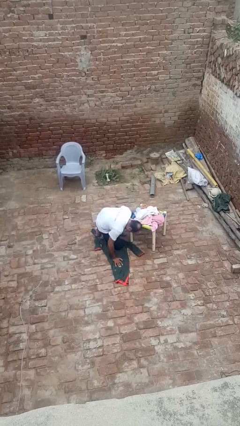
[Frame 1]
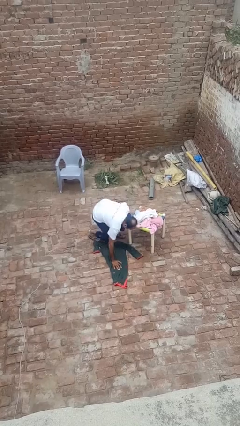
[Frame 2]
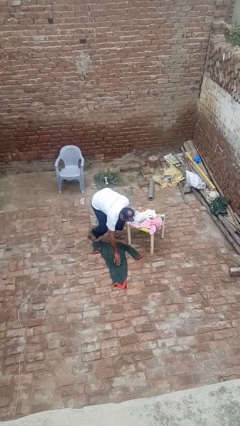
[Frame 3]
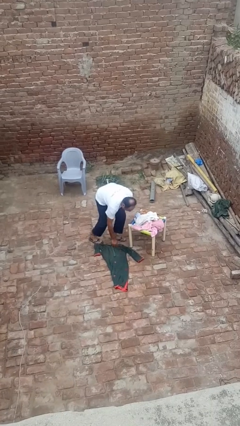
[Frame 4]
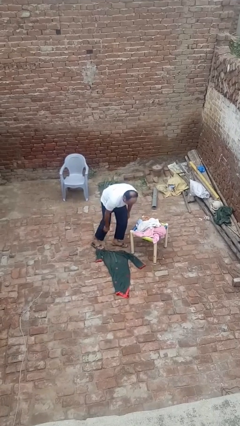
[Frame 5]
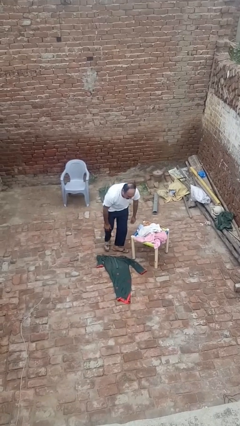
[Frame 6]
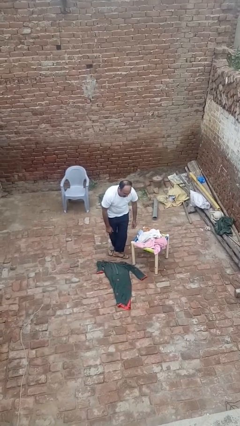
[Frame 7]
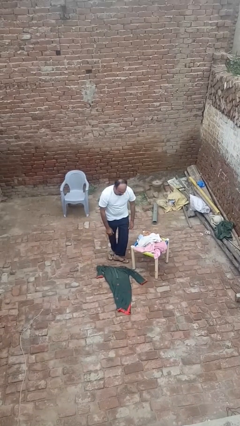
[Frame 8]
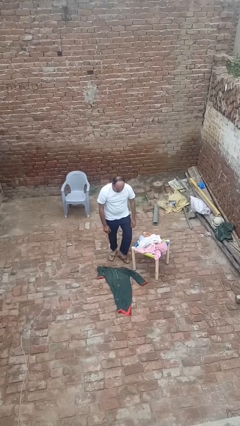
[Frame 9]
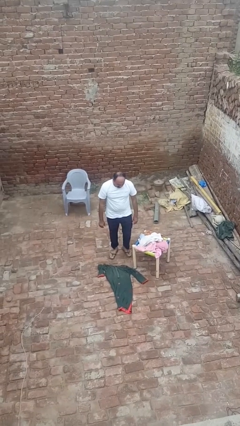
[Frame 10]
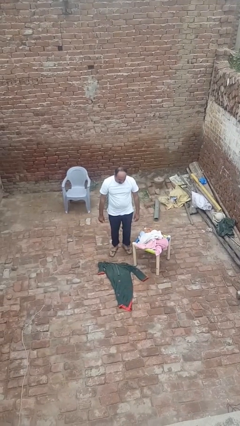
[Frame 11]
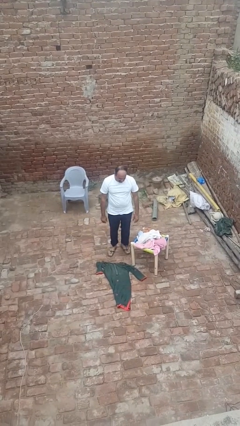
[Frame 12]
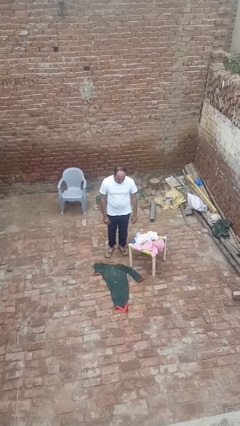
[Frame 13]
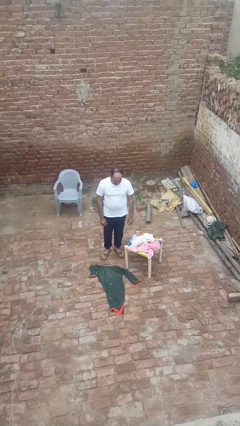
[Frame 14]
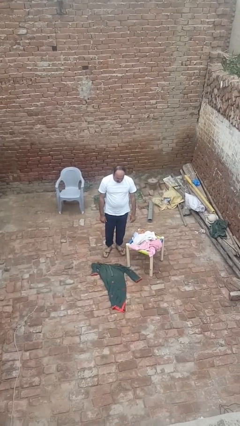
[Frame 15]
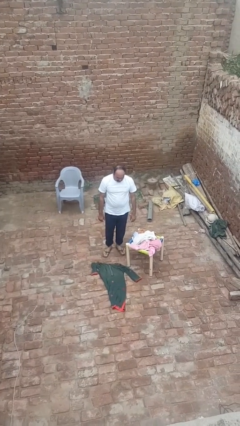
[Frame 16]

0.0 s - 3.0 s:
person stands up from floor

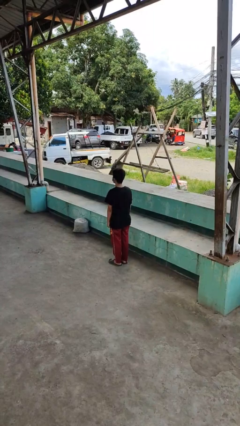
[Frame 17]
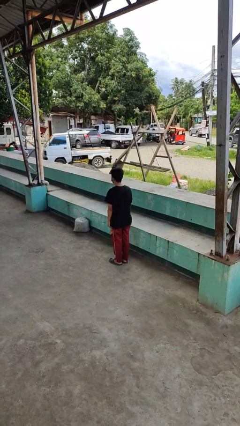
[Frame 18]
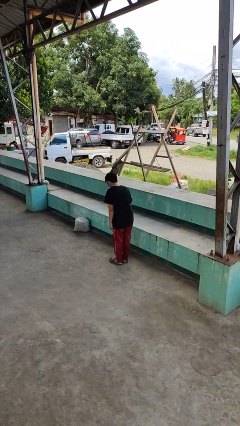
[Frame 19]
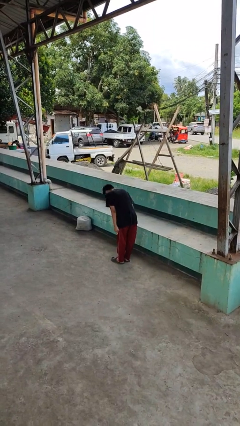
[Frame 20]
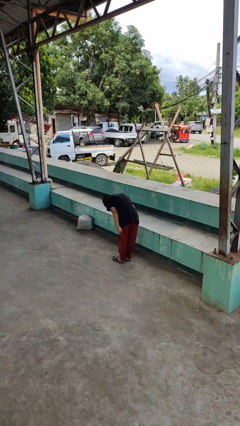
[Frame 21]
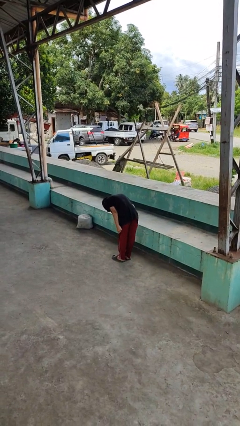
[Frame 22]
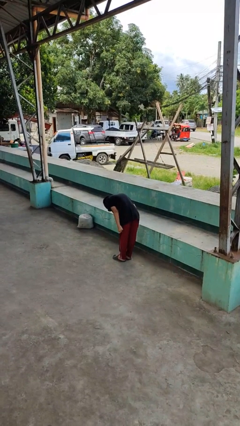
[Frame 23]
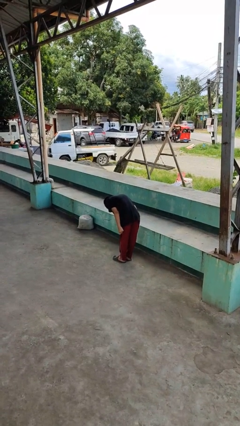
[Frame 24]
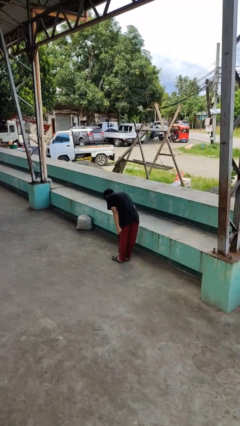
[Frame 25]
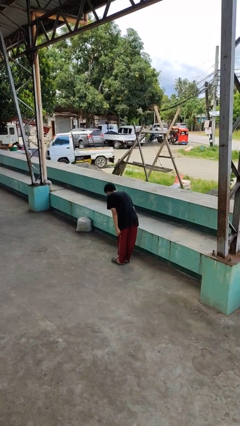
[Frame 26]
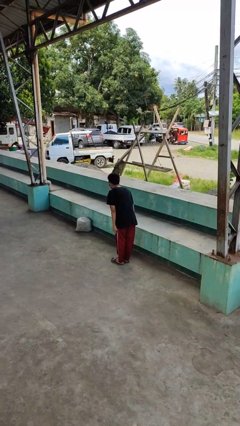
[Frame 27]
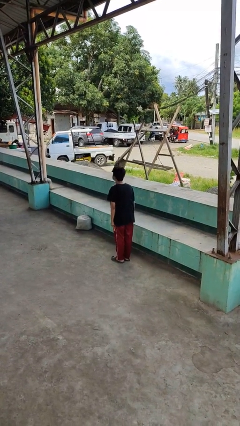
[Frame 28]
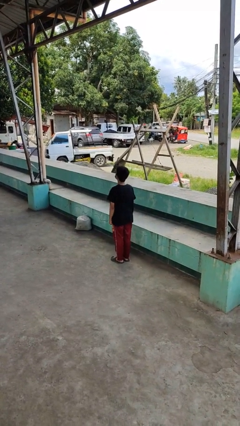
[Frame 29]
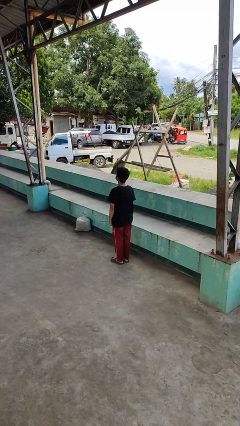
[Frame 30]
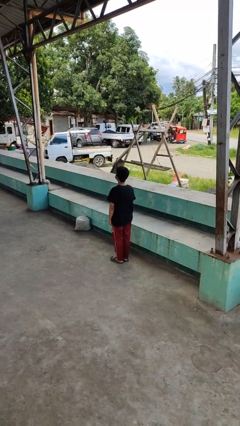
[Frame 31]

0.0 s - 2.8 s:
person bows

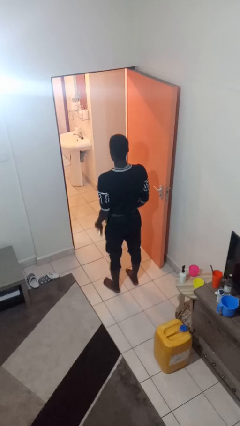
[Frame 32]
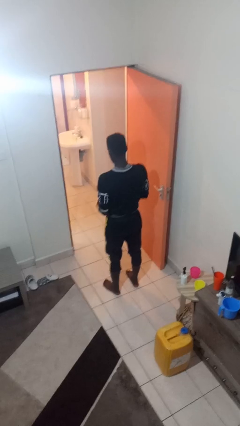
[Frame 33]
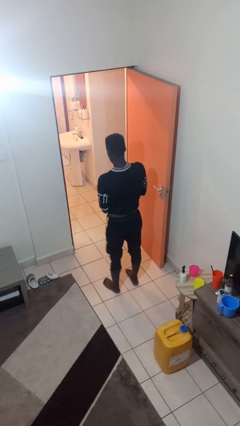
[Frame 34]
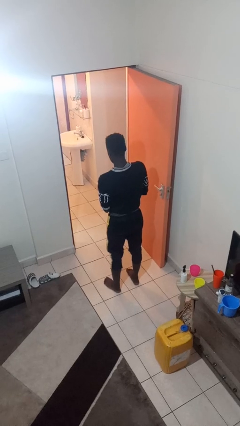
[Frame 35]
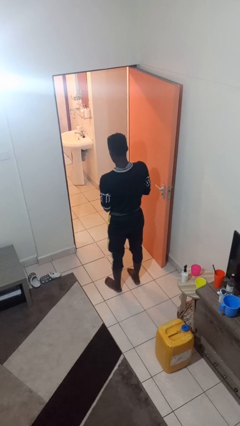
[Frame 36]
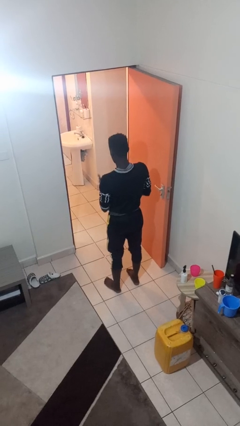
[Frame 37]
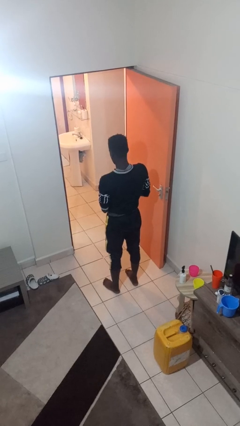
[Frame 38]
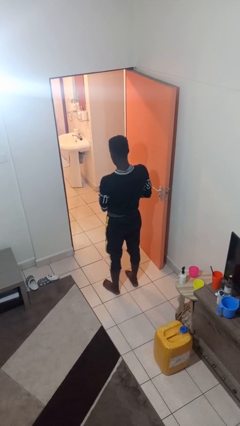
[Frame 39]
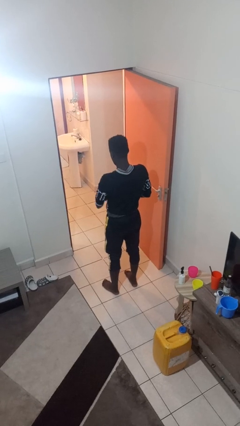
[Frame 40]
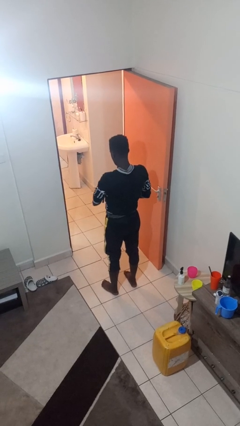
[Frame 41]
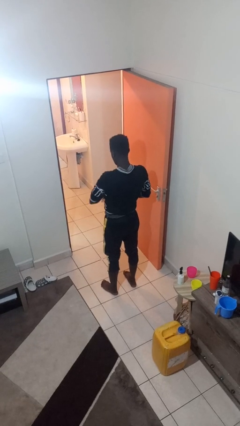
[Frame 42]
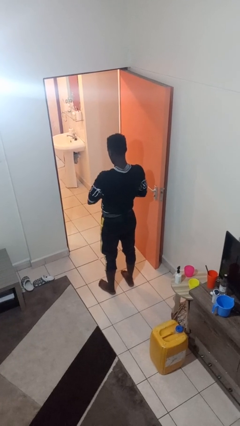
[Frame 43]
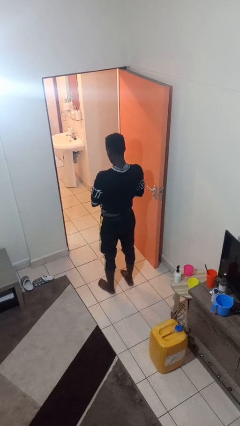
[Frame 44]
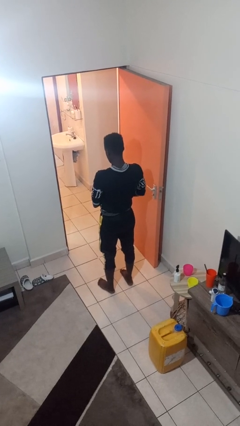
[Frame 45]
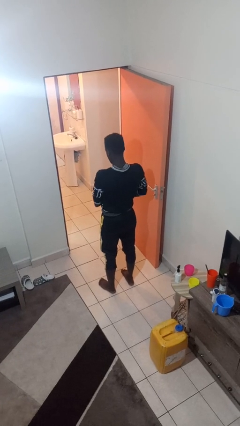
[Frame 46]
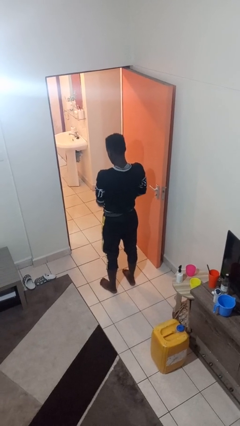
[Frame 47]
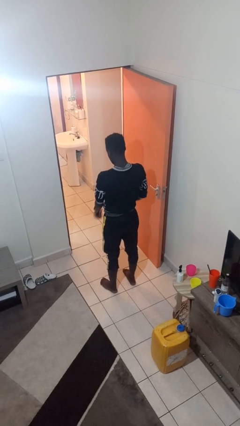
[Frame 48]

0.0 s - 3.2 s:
person puts on wristwatch

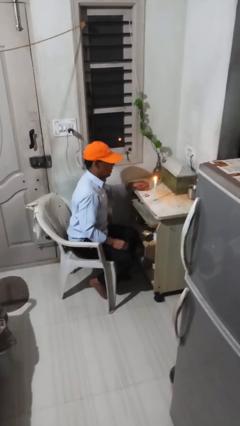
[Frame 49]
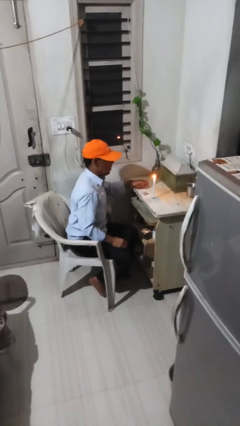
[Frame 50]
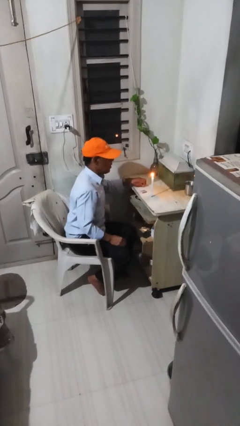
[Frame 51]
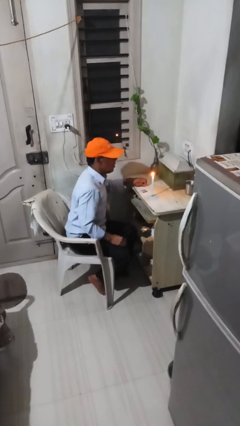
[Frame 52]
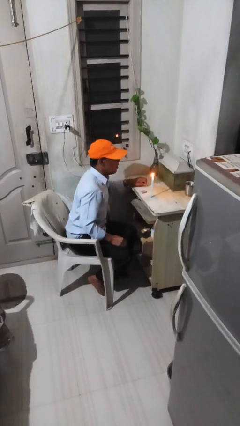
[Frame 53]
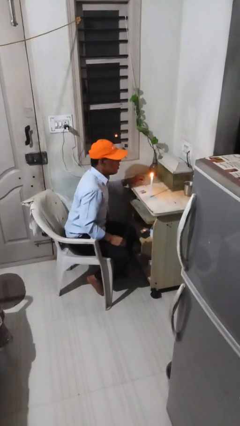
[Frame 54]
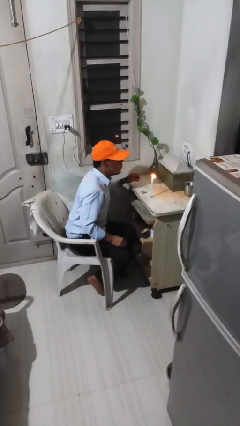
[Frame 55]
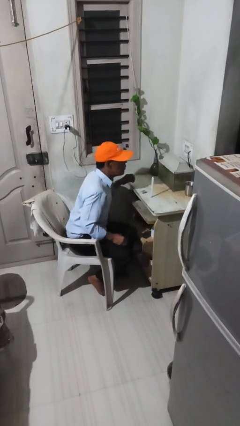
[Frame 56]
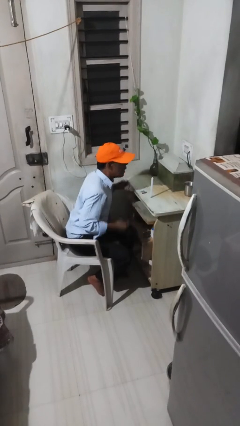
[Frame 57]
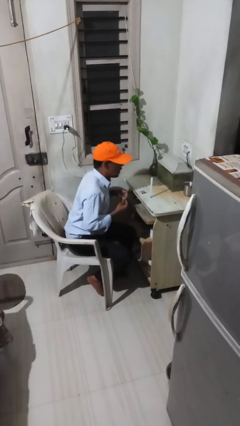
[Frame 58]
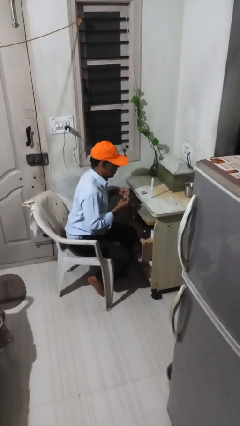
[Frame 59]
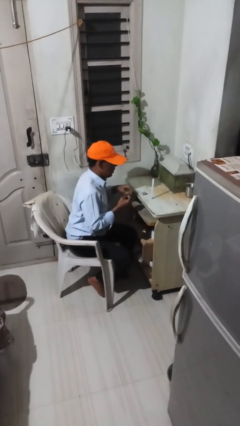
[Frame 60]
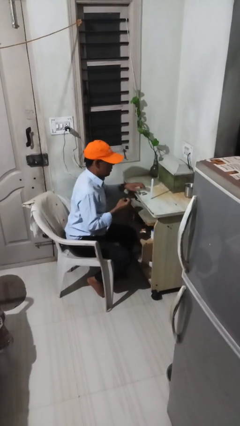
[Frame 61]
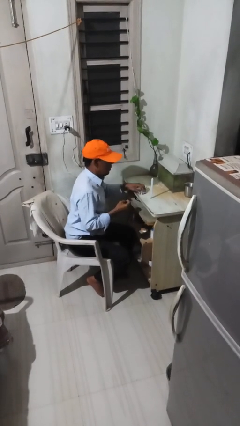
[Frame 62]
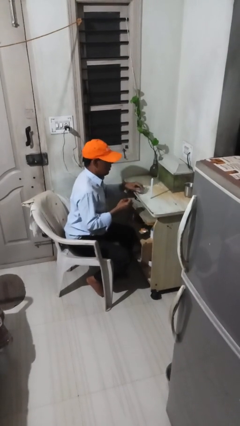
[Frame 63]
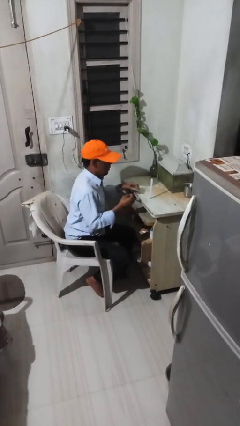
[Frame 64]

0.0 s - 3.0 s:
person extinguishes candle

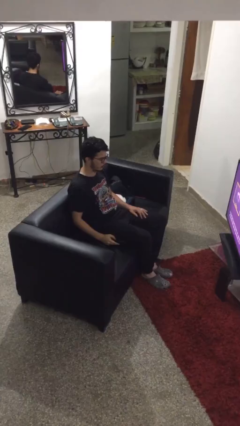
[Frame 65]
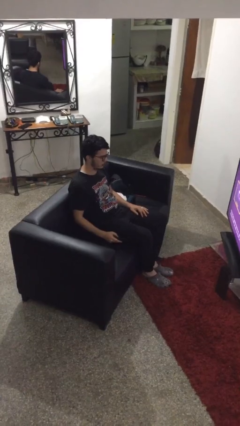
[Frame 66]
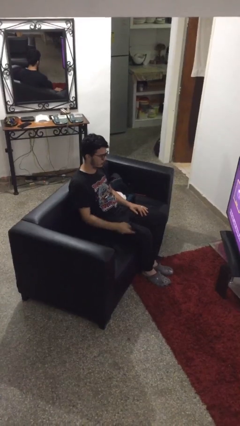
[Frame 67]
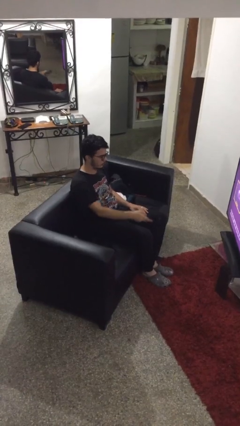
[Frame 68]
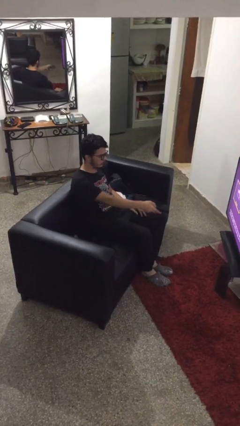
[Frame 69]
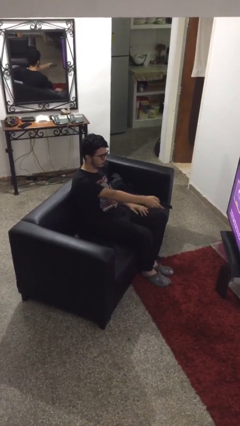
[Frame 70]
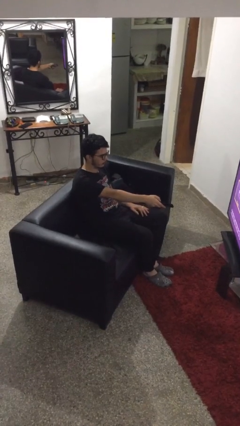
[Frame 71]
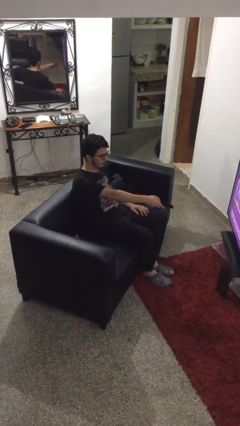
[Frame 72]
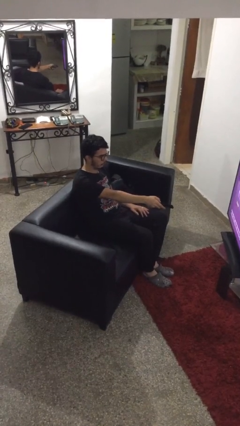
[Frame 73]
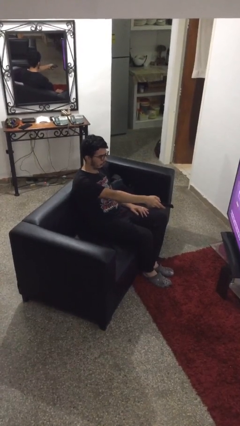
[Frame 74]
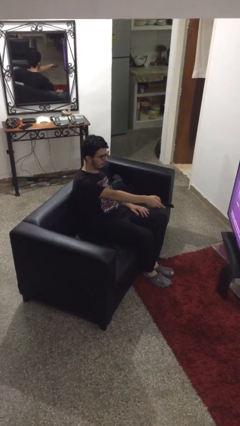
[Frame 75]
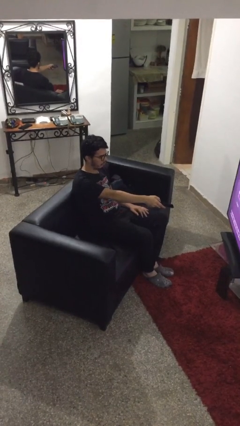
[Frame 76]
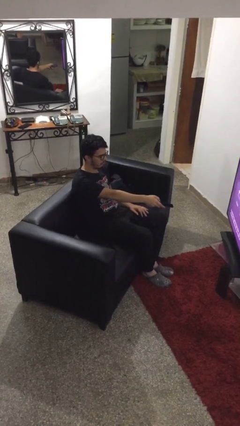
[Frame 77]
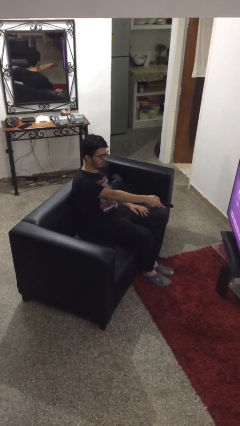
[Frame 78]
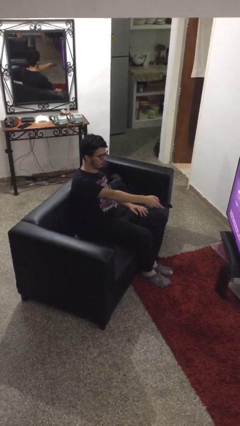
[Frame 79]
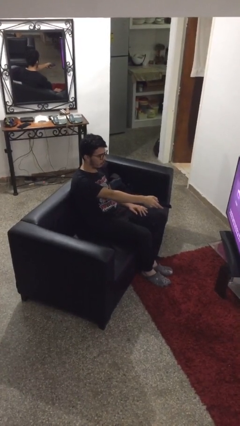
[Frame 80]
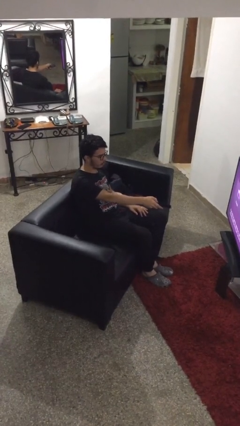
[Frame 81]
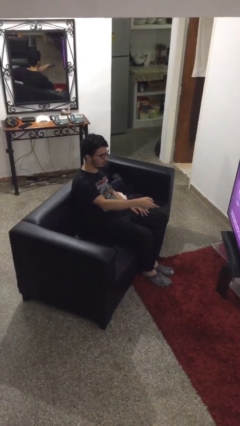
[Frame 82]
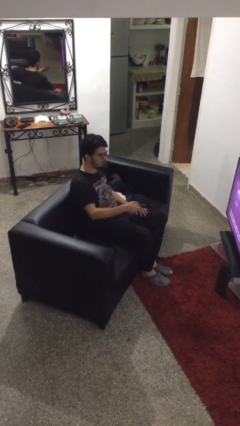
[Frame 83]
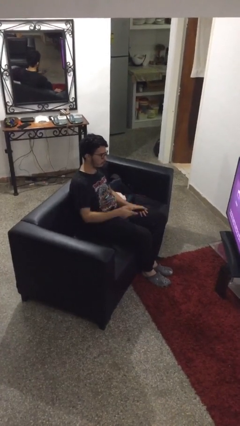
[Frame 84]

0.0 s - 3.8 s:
person uses television remote

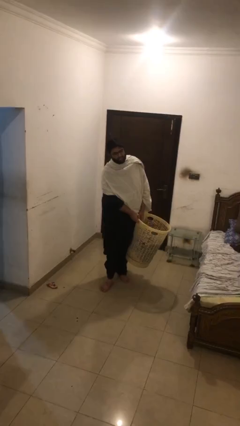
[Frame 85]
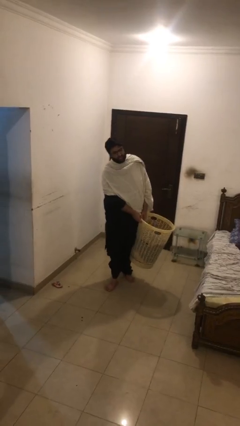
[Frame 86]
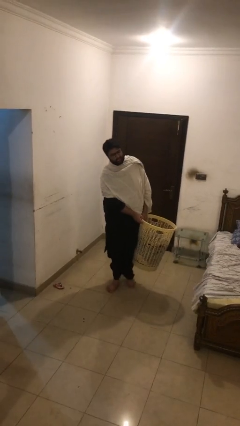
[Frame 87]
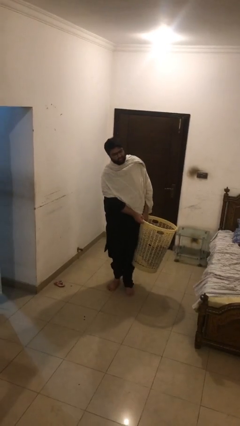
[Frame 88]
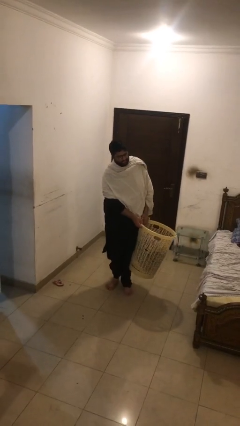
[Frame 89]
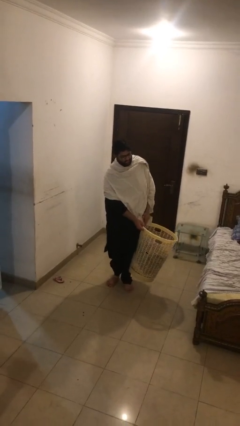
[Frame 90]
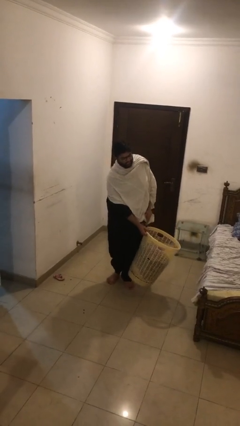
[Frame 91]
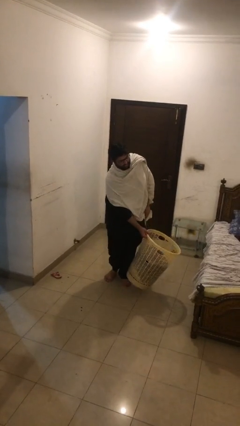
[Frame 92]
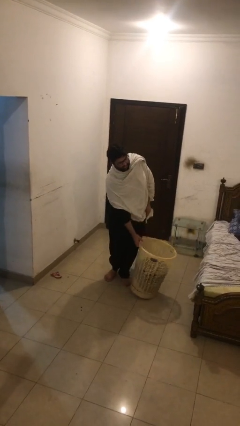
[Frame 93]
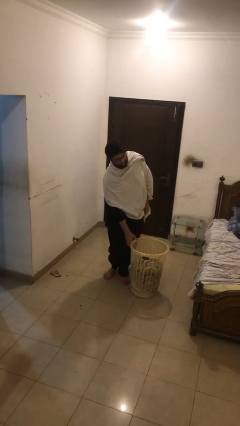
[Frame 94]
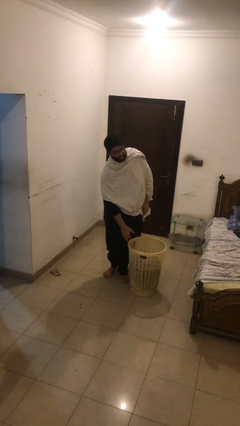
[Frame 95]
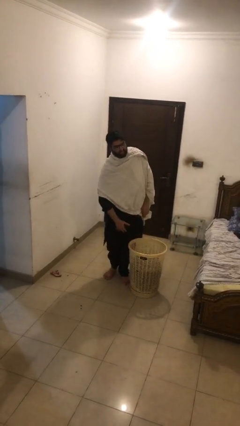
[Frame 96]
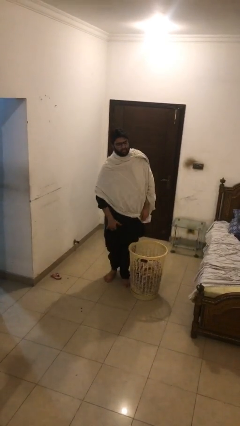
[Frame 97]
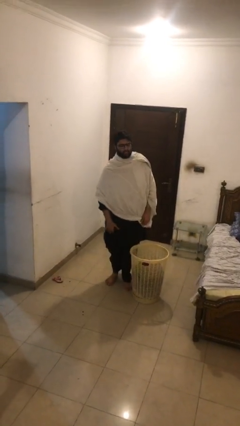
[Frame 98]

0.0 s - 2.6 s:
person puts down object on floor
